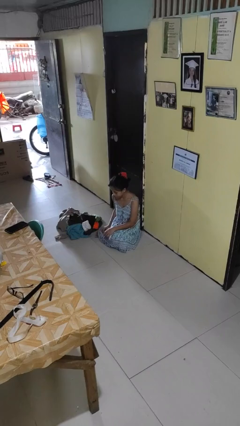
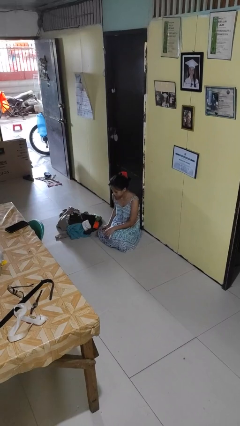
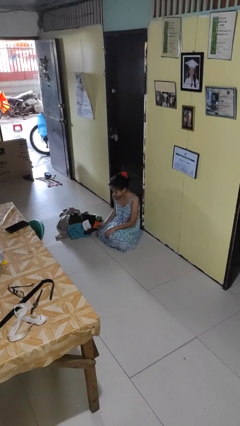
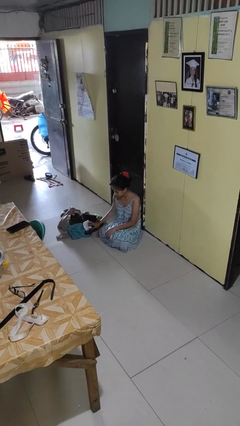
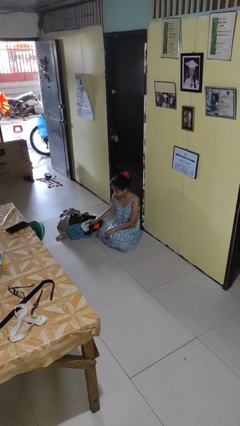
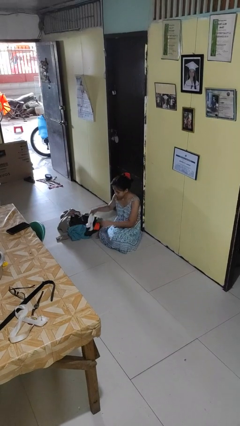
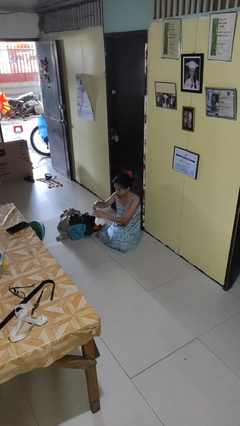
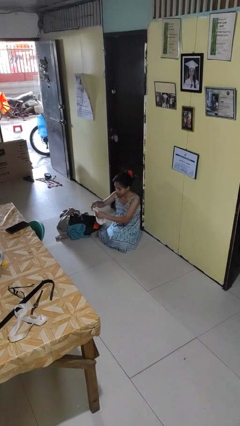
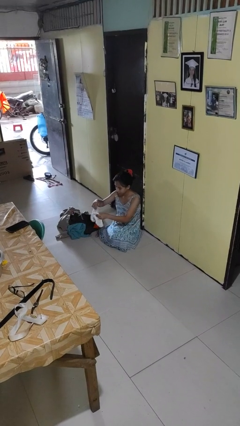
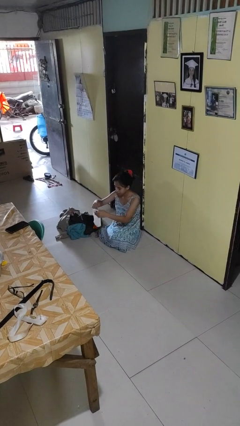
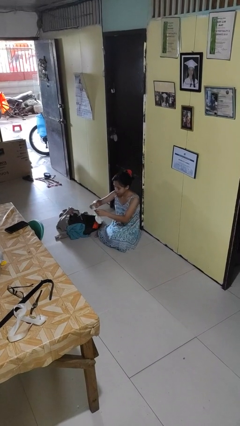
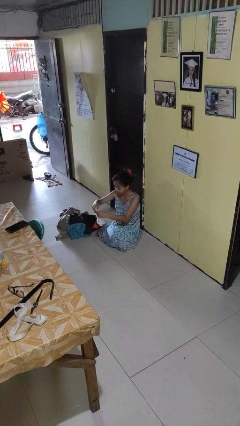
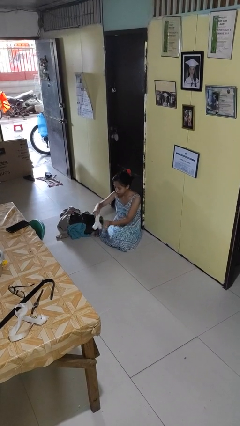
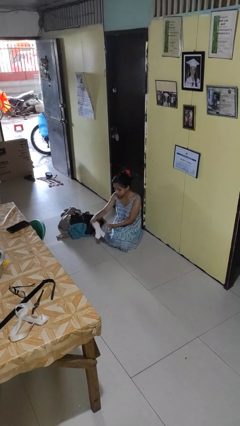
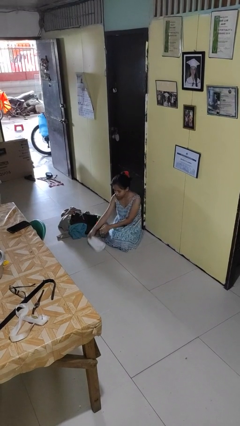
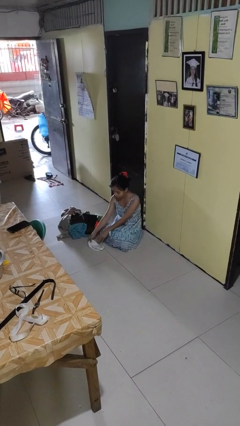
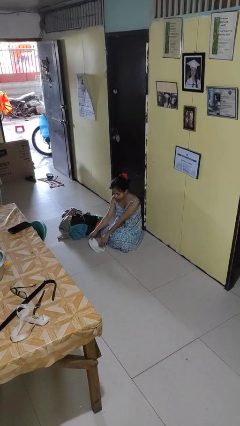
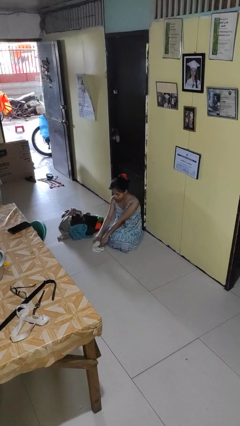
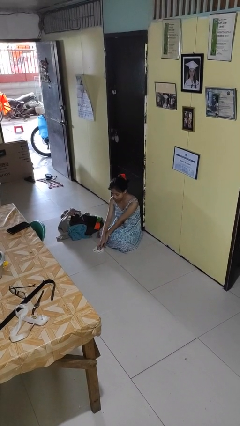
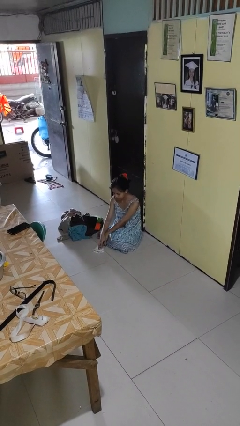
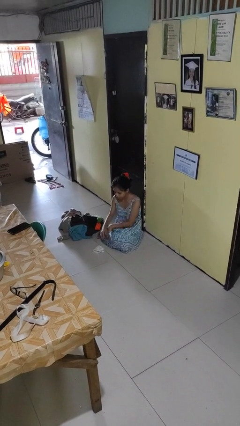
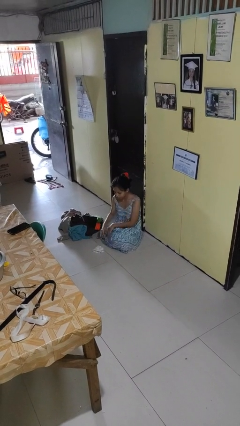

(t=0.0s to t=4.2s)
person folds socks

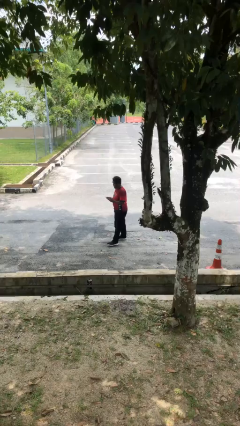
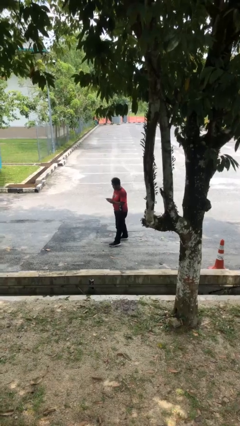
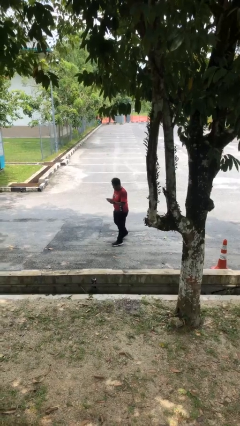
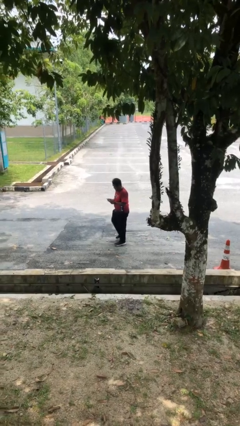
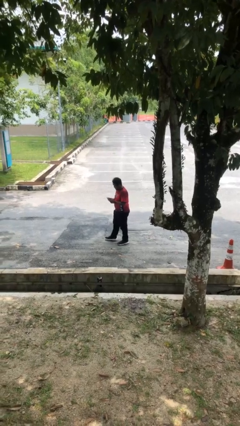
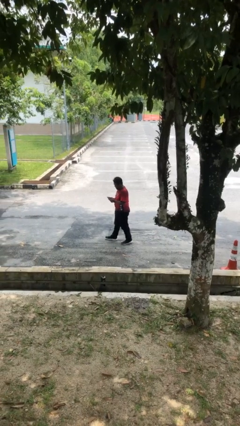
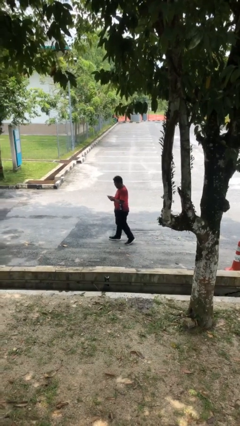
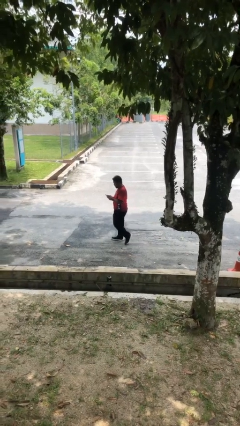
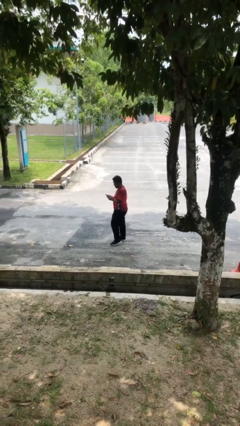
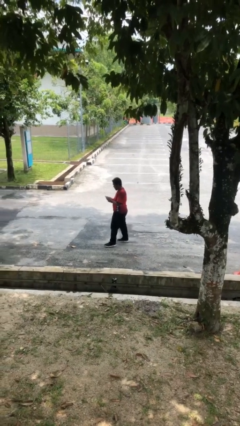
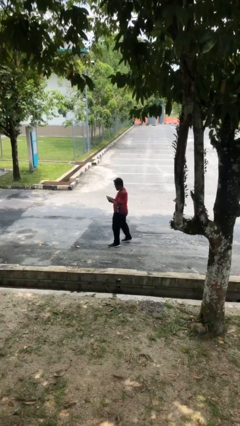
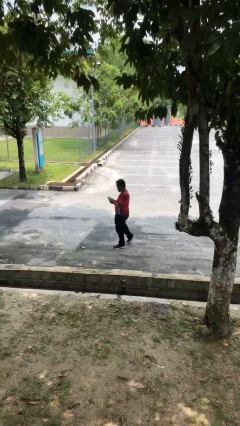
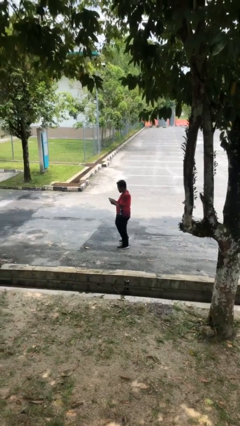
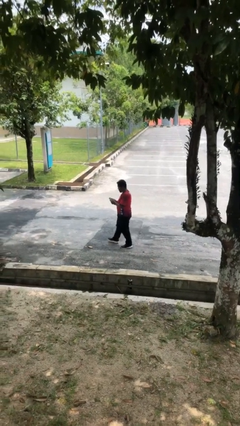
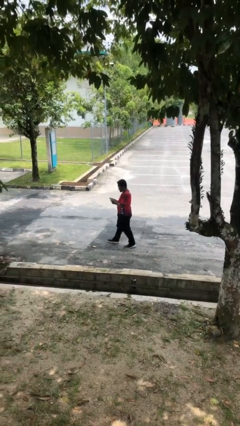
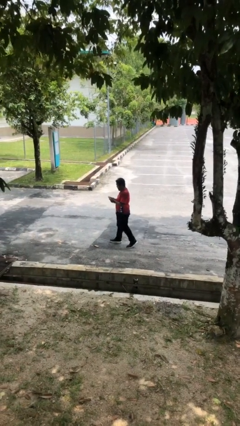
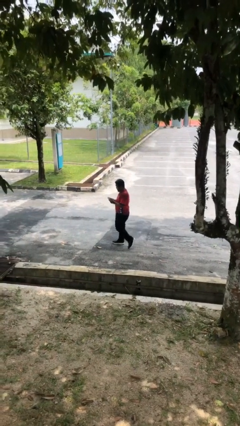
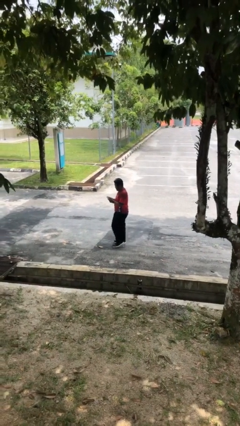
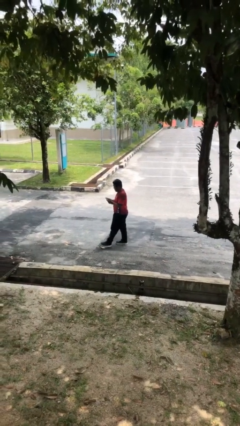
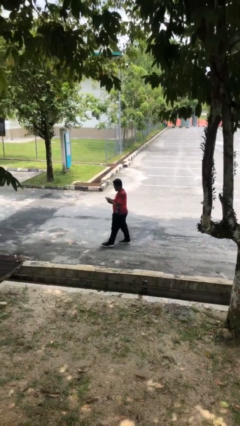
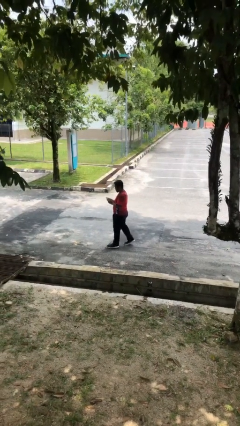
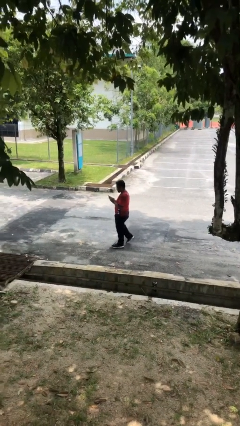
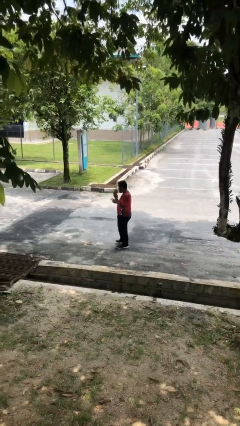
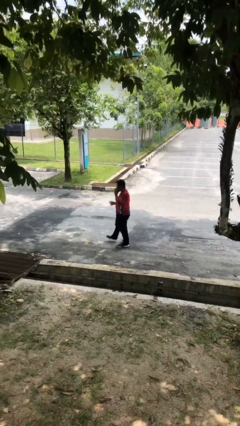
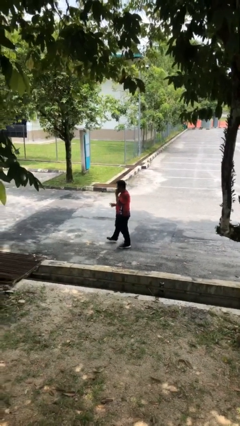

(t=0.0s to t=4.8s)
person texts on phone

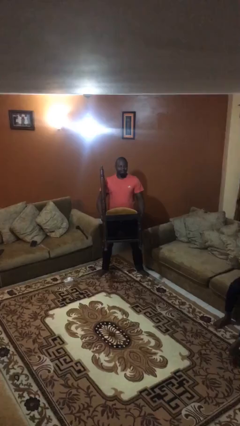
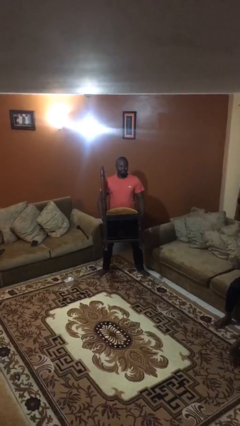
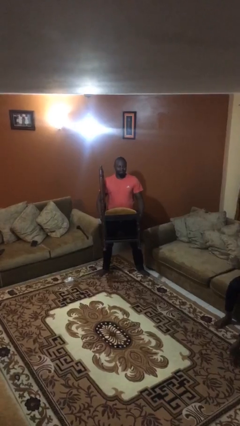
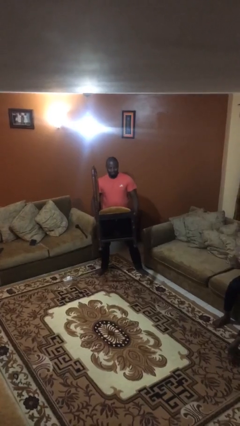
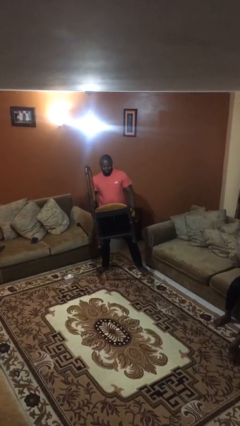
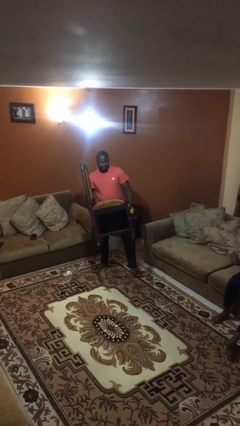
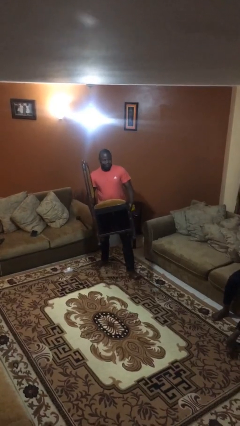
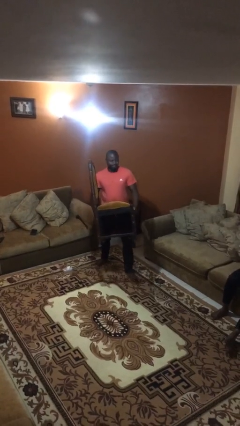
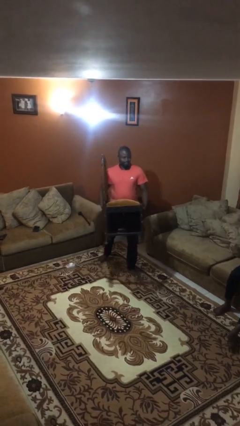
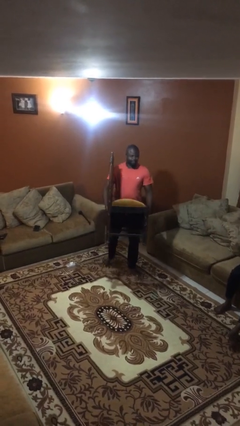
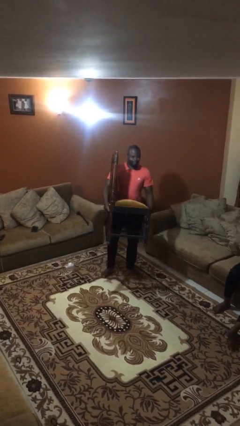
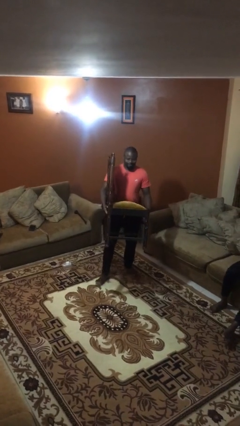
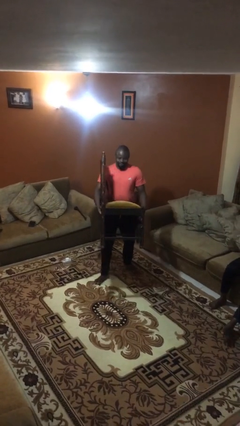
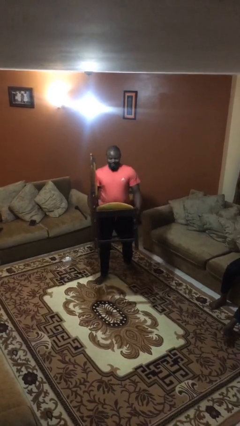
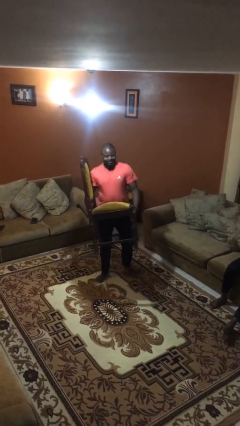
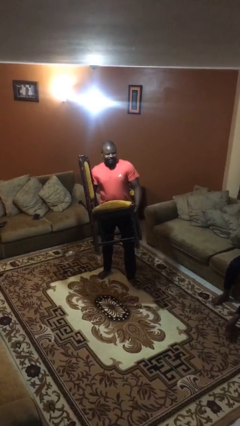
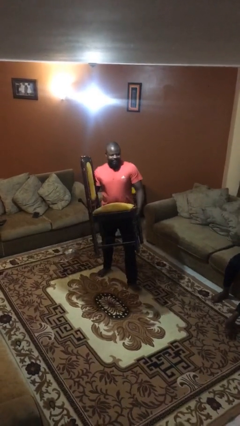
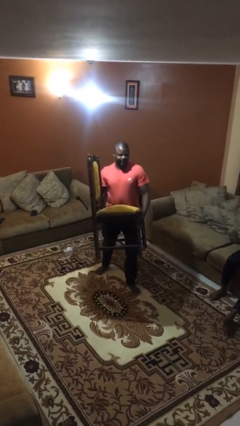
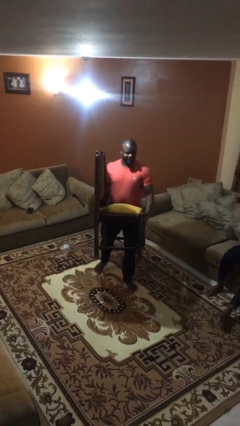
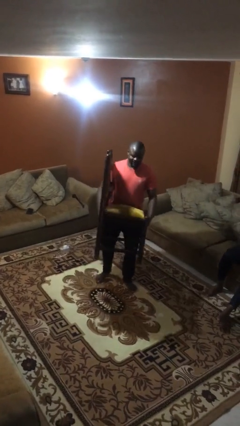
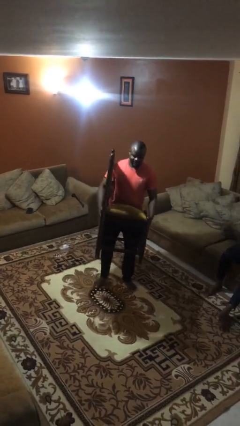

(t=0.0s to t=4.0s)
person carries heavy object

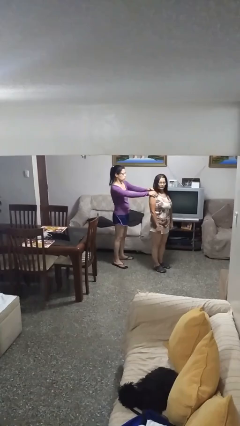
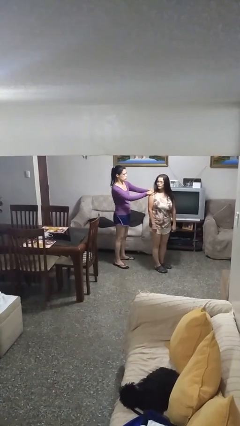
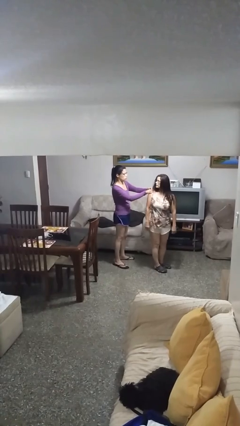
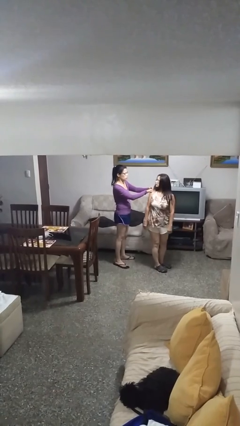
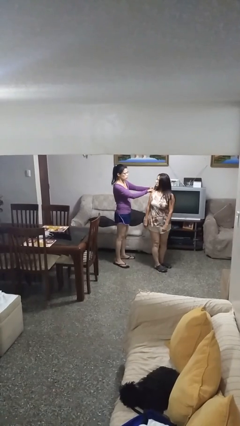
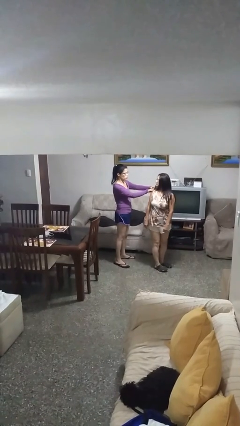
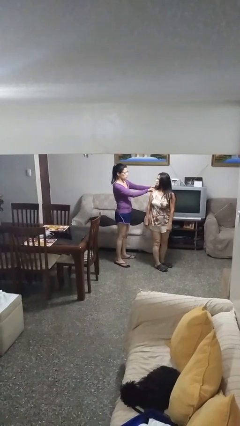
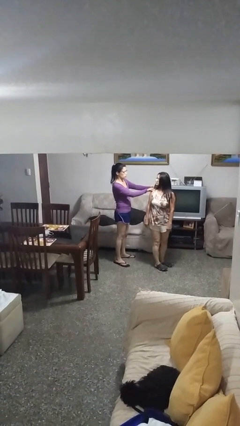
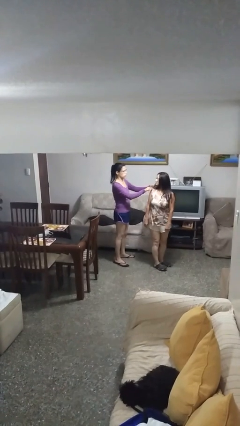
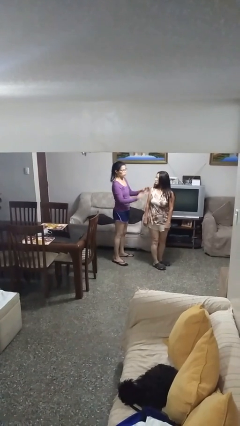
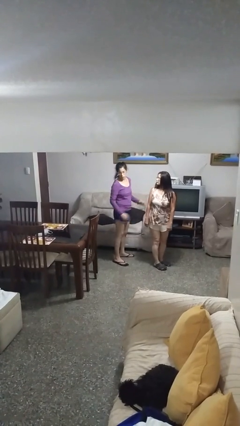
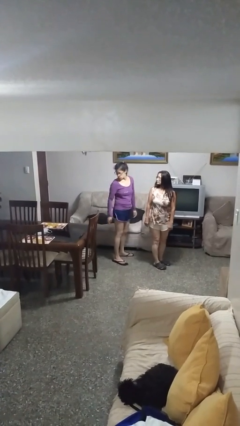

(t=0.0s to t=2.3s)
person spins person around

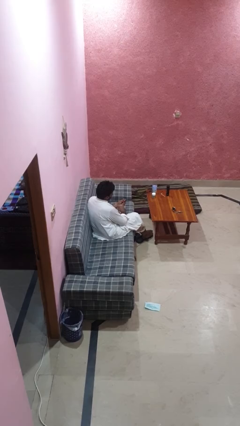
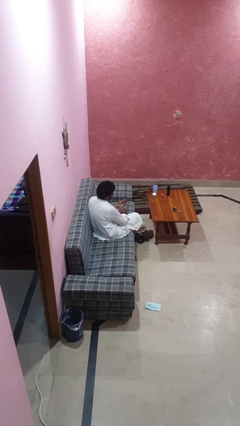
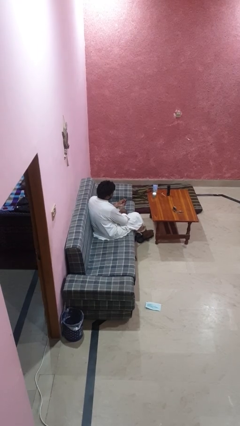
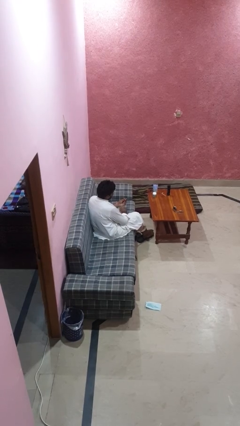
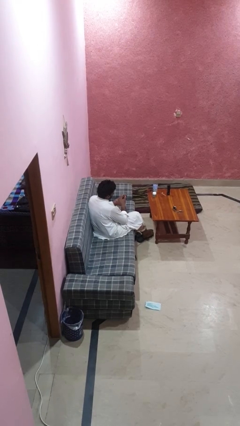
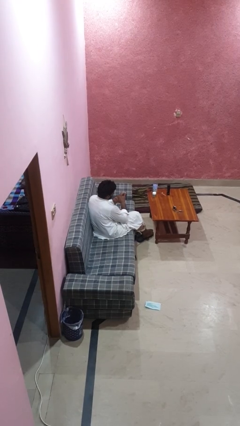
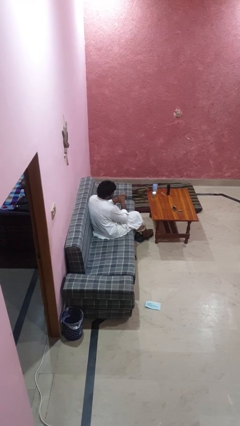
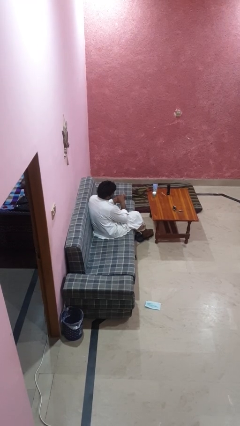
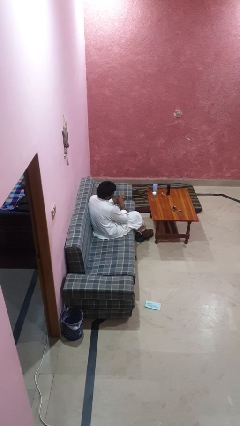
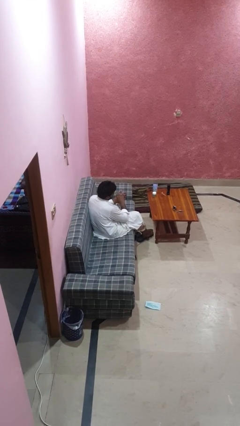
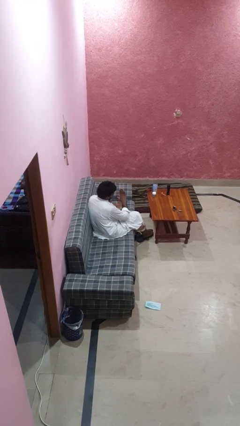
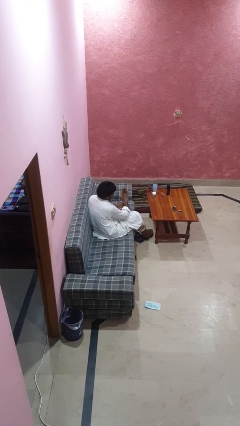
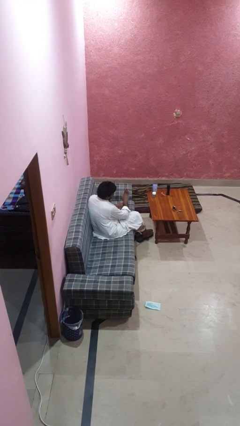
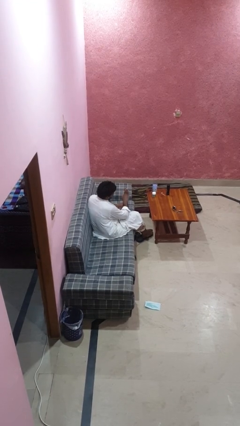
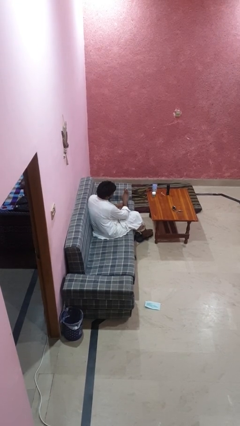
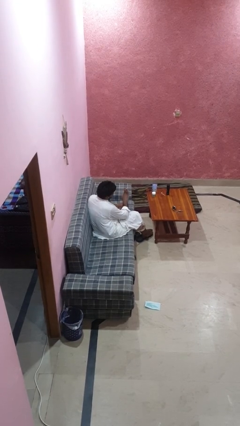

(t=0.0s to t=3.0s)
person puts on ring
